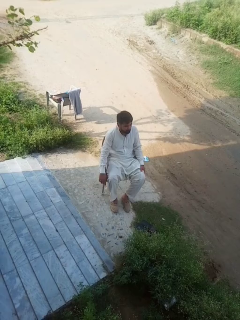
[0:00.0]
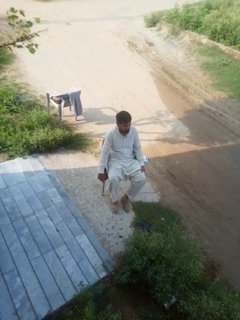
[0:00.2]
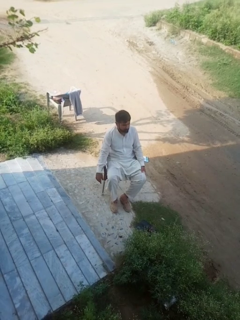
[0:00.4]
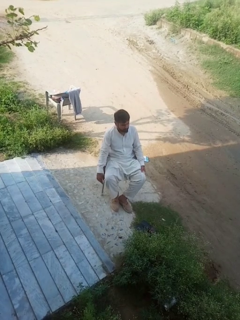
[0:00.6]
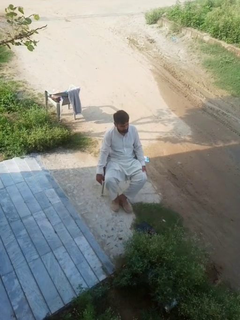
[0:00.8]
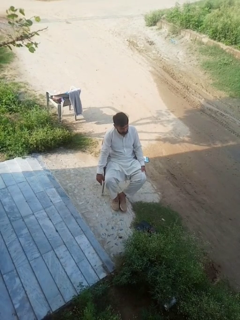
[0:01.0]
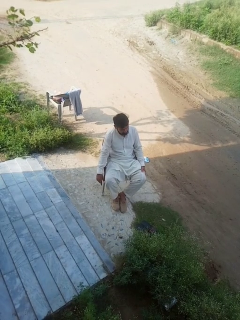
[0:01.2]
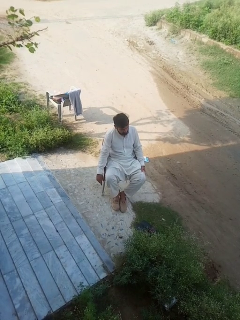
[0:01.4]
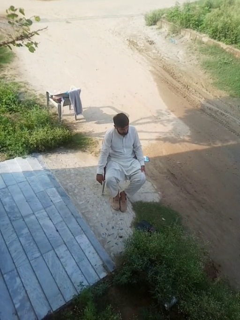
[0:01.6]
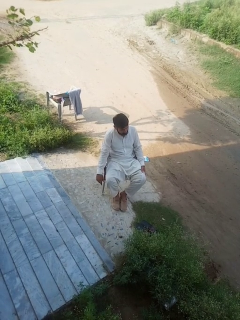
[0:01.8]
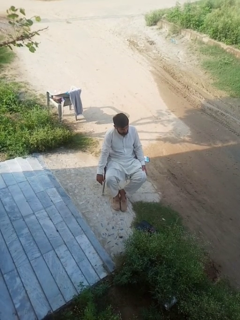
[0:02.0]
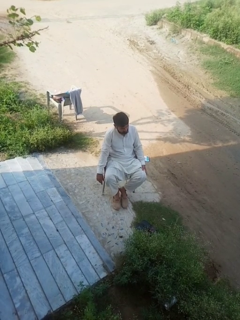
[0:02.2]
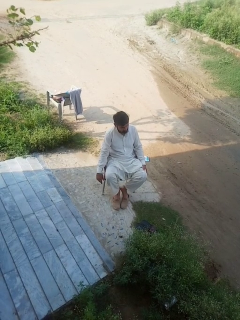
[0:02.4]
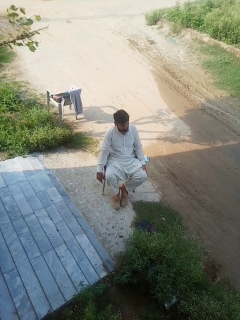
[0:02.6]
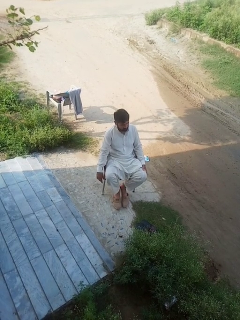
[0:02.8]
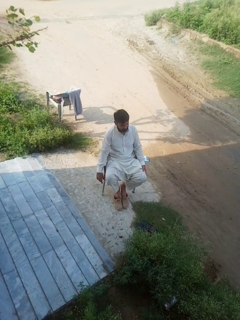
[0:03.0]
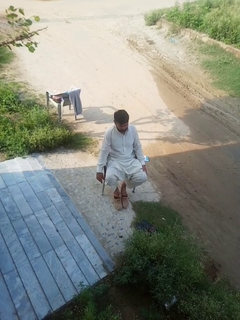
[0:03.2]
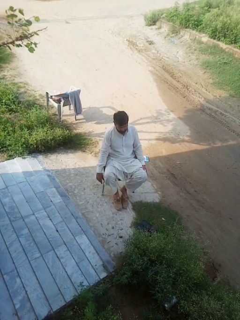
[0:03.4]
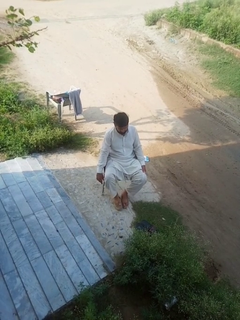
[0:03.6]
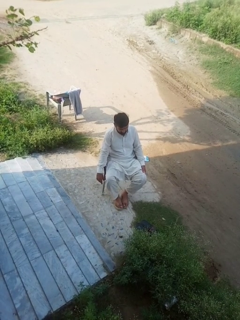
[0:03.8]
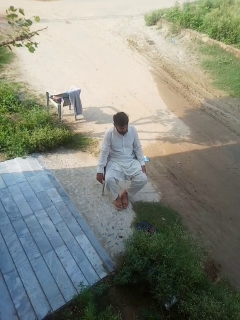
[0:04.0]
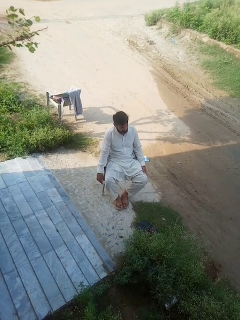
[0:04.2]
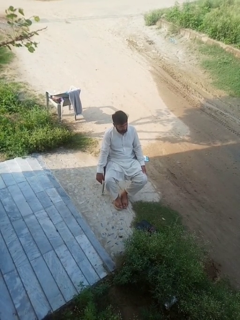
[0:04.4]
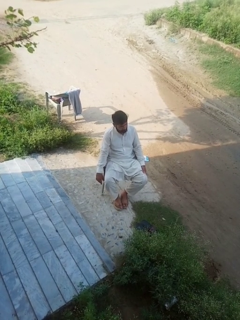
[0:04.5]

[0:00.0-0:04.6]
person takes off shoes

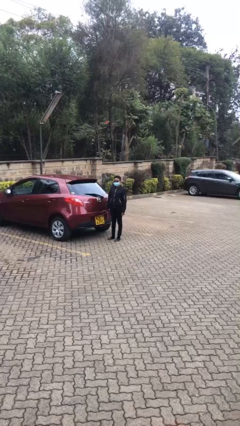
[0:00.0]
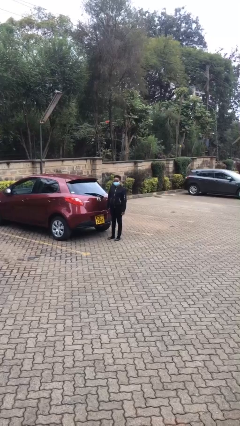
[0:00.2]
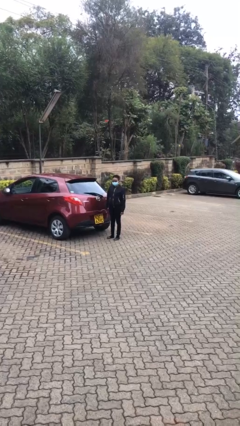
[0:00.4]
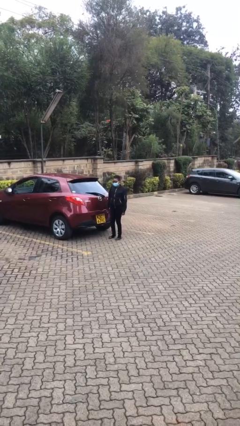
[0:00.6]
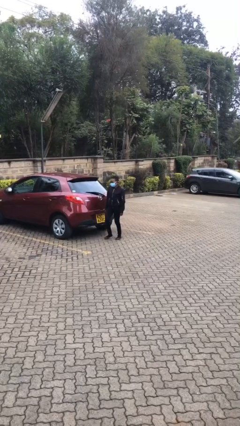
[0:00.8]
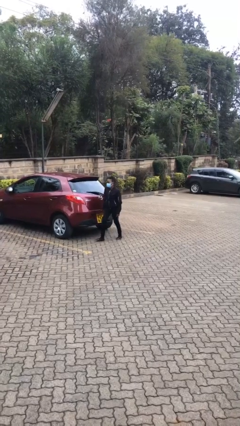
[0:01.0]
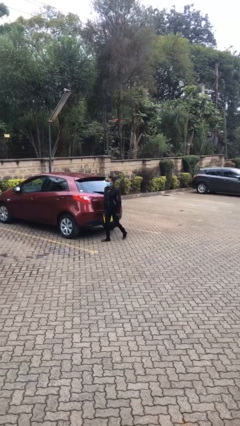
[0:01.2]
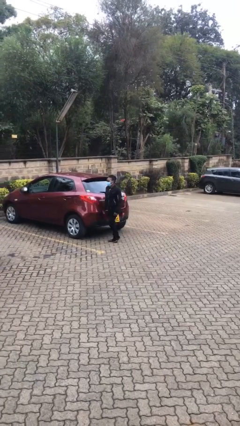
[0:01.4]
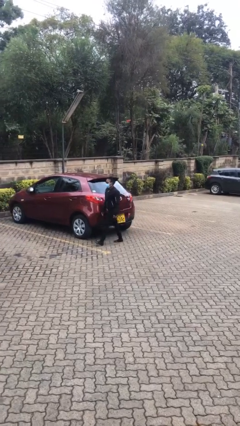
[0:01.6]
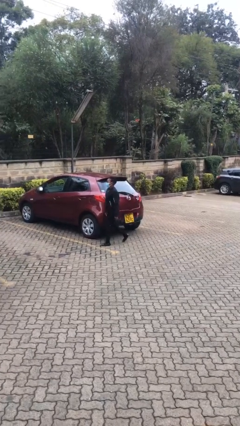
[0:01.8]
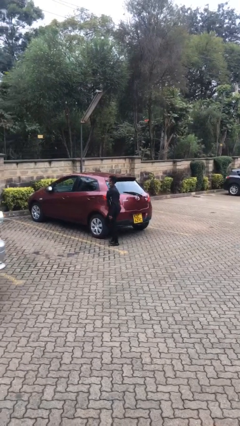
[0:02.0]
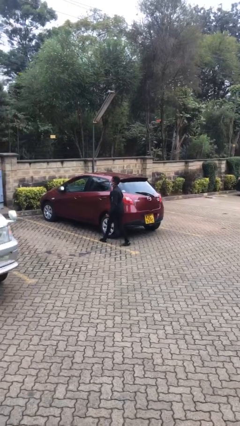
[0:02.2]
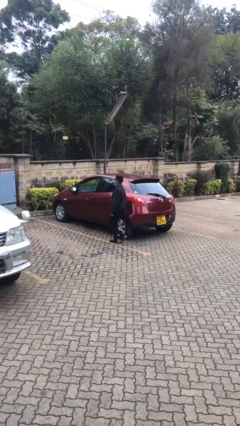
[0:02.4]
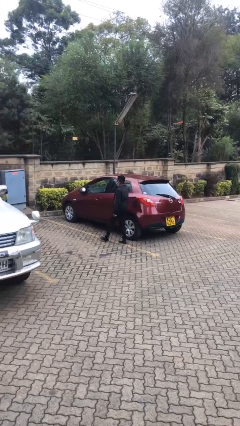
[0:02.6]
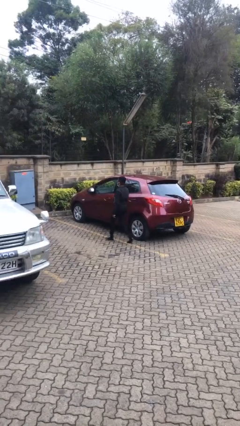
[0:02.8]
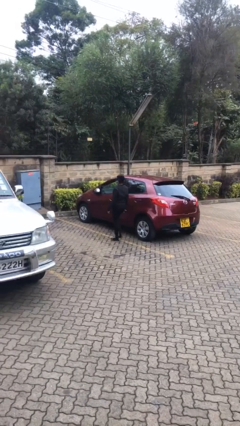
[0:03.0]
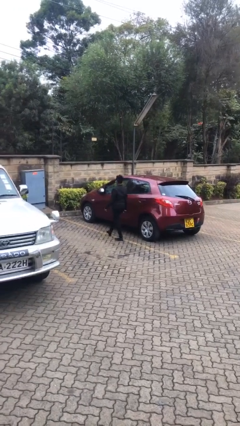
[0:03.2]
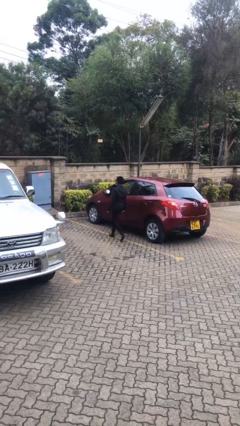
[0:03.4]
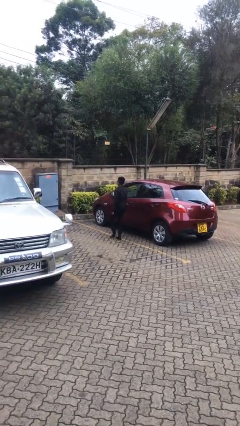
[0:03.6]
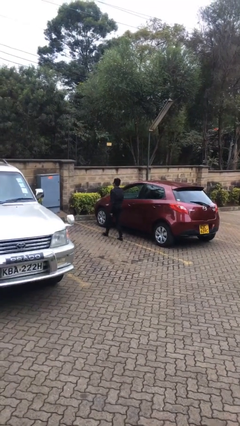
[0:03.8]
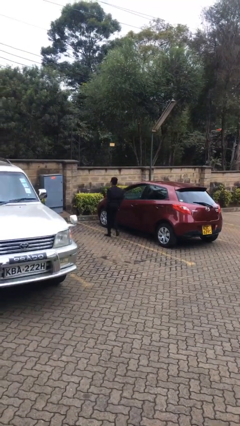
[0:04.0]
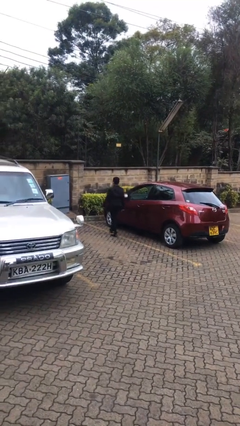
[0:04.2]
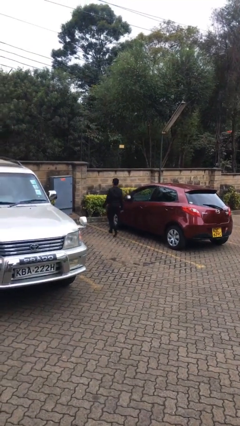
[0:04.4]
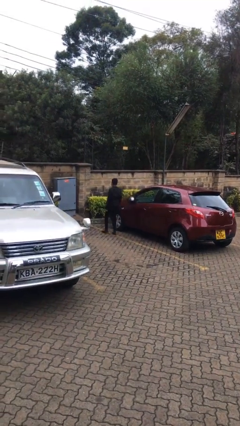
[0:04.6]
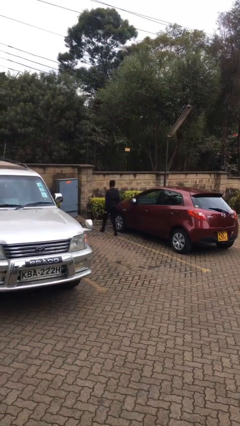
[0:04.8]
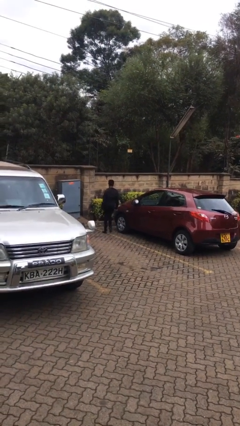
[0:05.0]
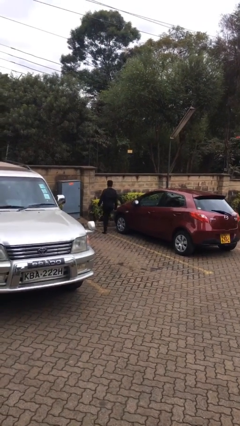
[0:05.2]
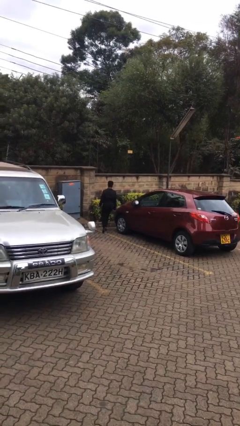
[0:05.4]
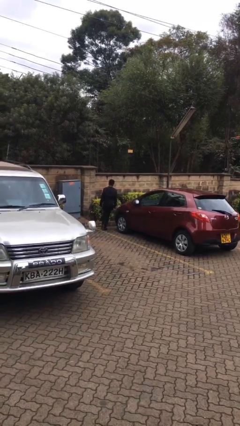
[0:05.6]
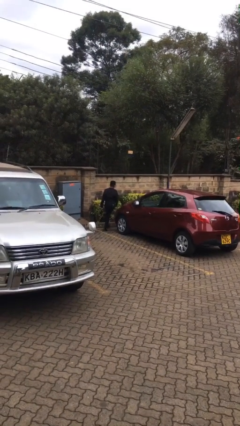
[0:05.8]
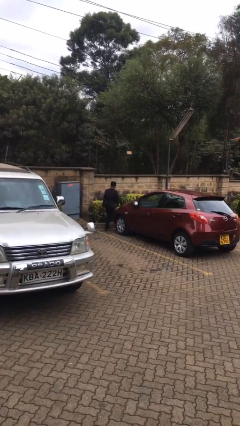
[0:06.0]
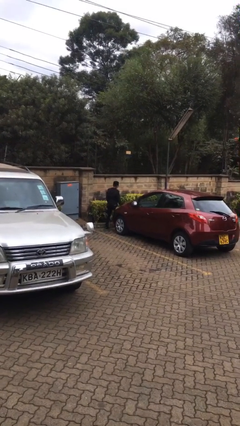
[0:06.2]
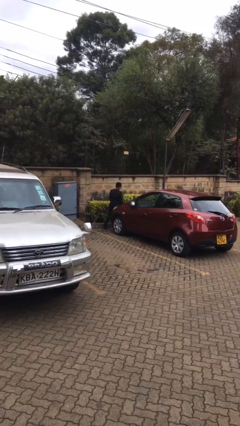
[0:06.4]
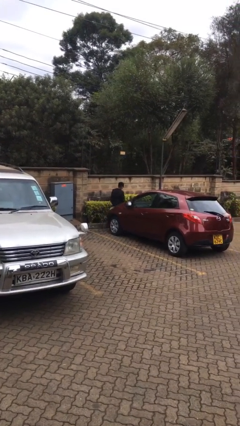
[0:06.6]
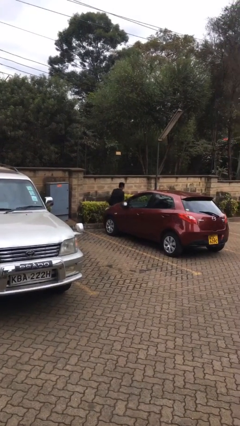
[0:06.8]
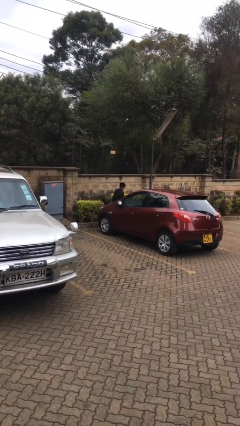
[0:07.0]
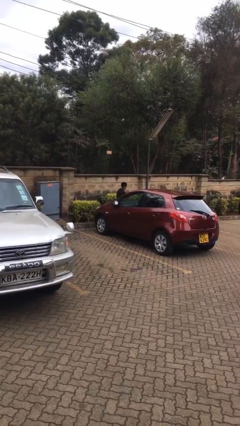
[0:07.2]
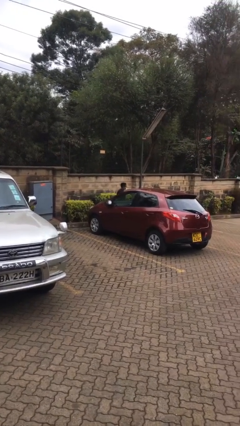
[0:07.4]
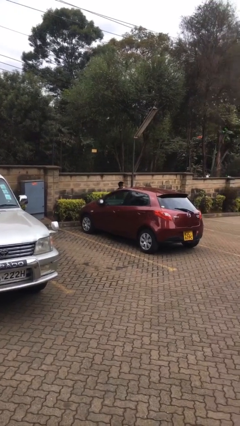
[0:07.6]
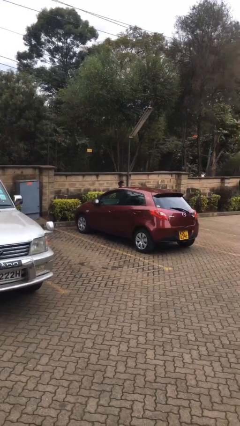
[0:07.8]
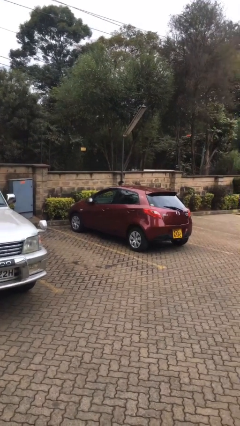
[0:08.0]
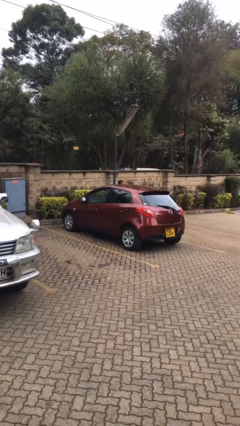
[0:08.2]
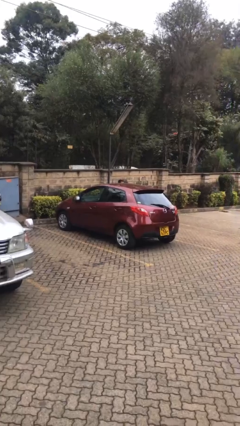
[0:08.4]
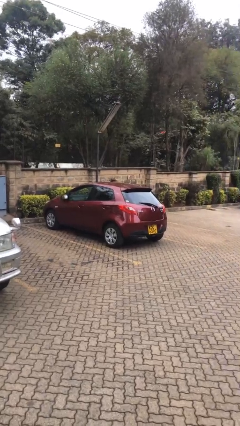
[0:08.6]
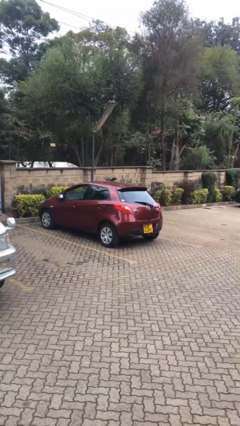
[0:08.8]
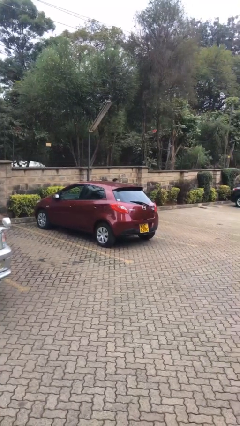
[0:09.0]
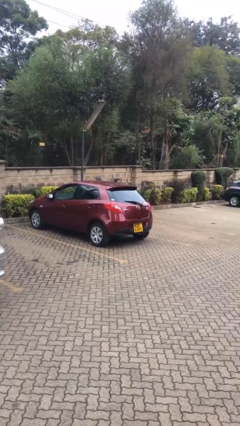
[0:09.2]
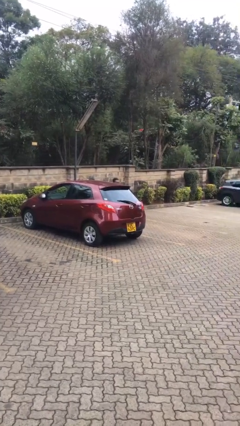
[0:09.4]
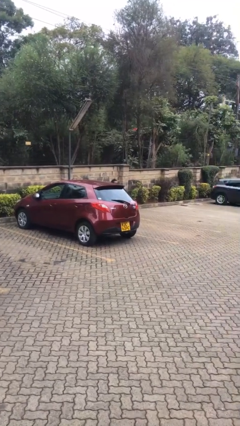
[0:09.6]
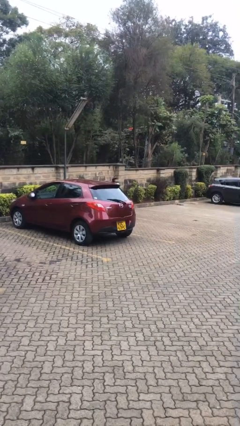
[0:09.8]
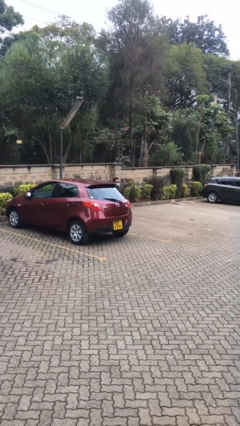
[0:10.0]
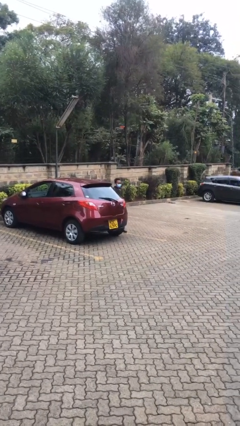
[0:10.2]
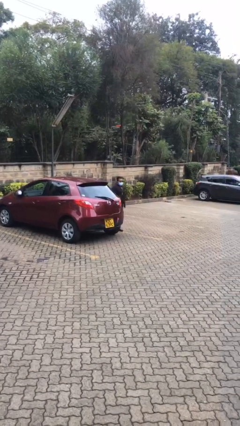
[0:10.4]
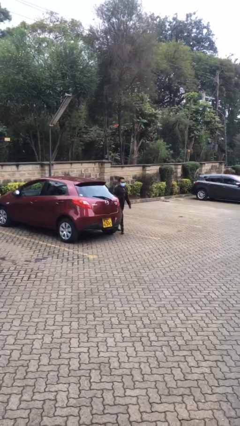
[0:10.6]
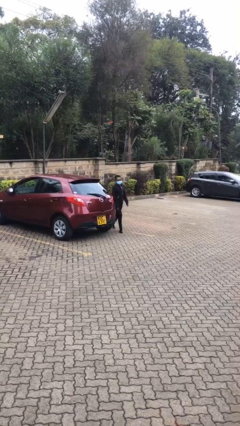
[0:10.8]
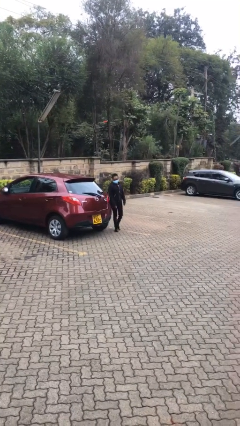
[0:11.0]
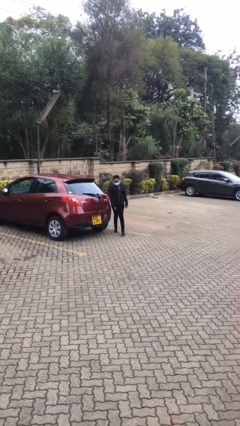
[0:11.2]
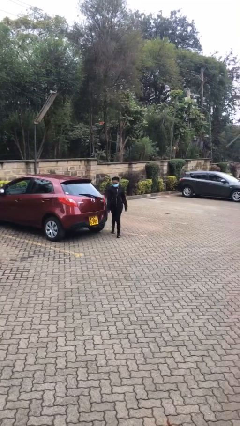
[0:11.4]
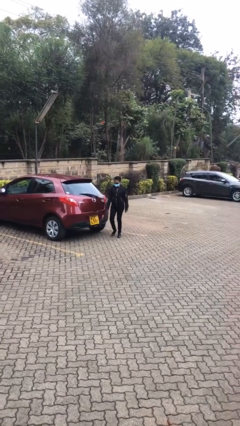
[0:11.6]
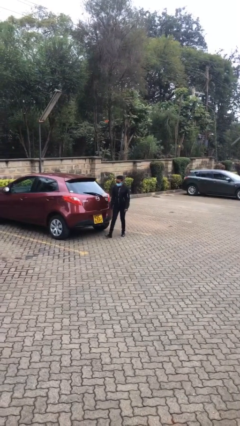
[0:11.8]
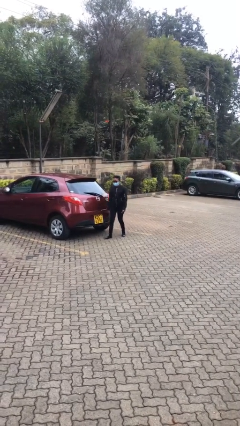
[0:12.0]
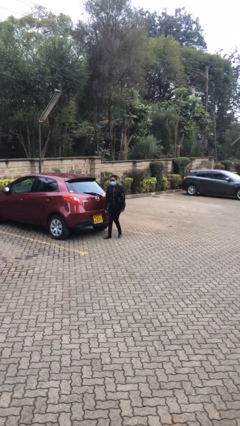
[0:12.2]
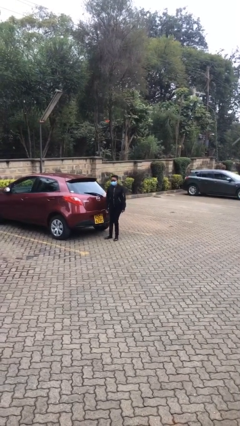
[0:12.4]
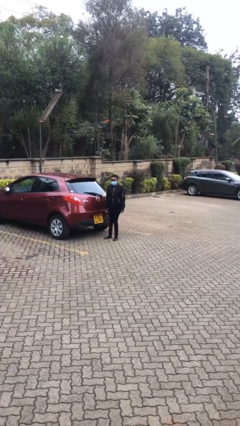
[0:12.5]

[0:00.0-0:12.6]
person walks around car

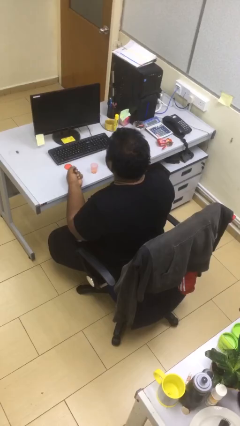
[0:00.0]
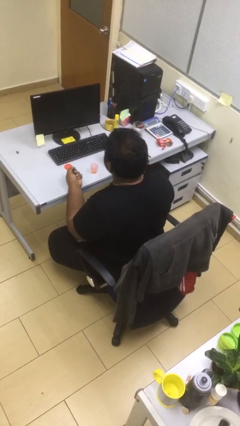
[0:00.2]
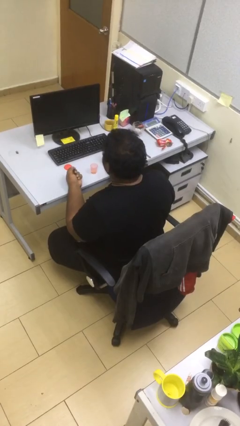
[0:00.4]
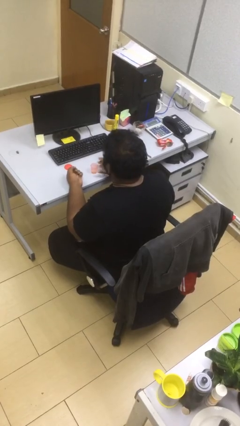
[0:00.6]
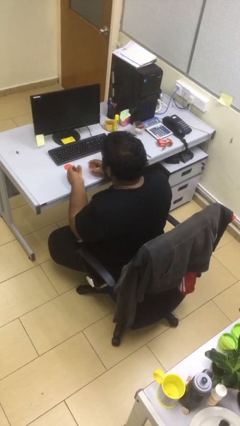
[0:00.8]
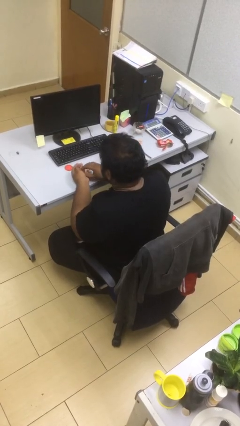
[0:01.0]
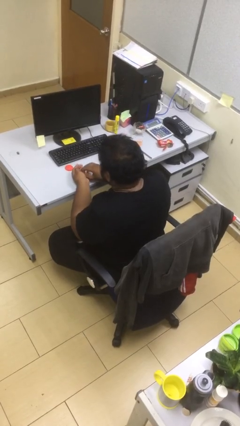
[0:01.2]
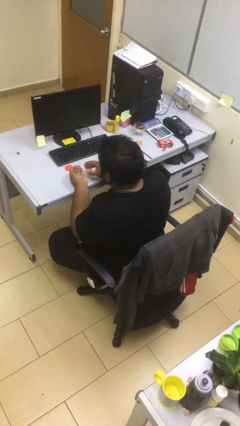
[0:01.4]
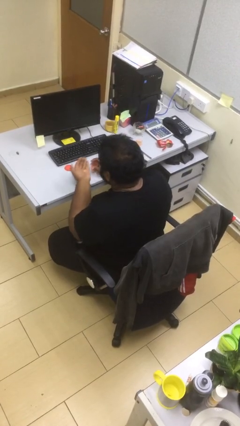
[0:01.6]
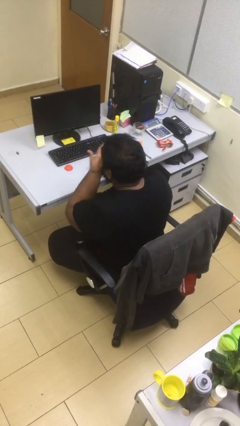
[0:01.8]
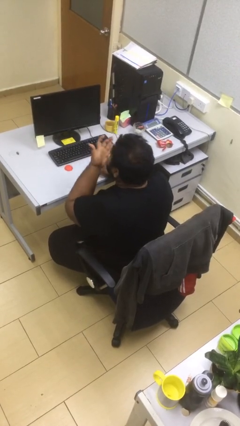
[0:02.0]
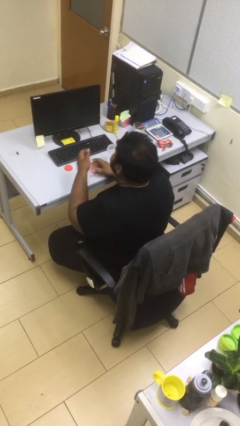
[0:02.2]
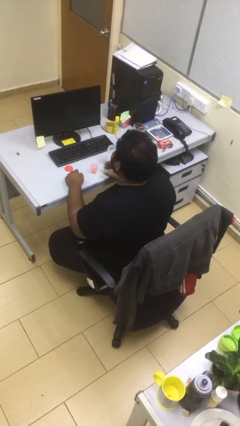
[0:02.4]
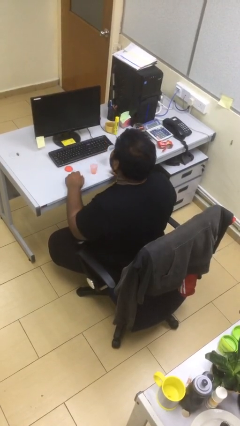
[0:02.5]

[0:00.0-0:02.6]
person takes medicine pills
